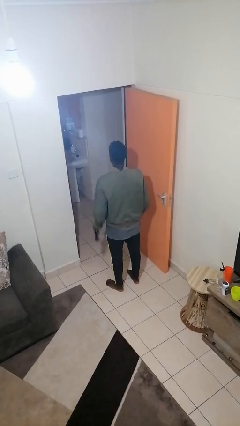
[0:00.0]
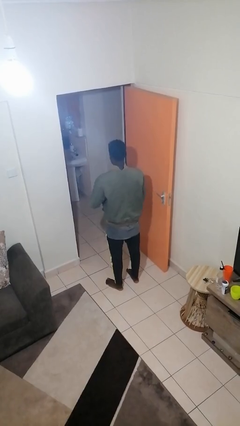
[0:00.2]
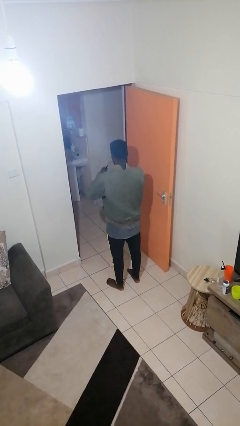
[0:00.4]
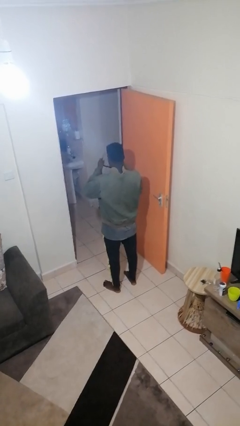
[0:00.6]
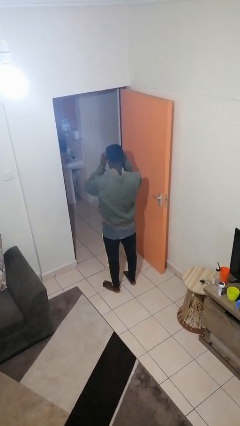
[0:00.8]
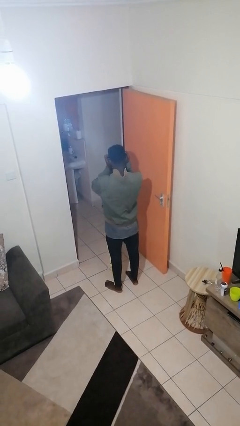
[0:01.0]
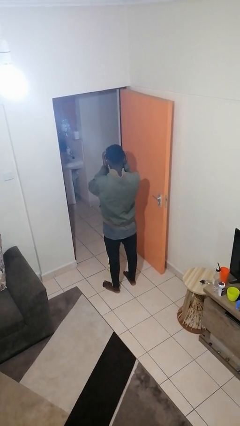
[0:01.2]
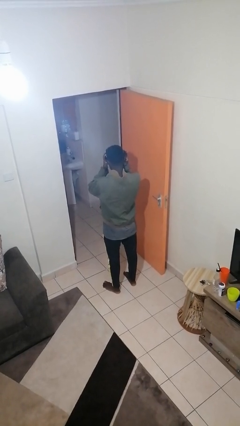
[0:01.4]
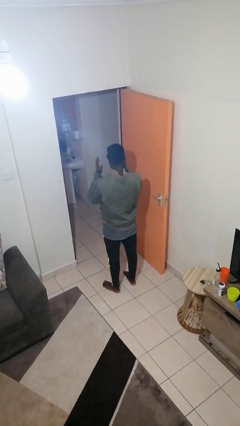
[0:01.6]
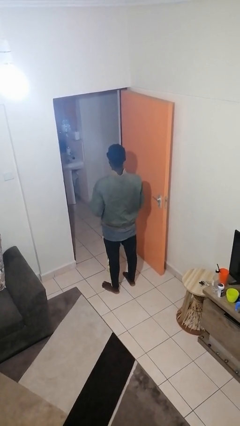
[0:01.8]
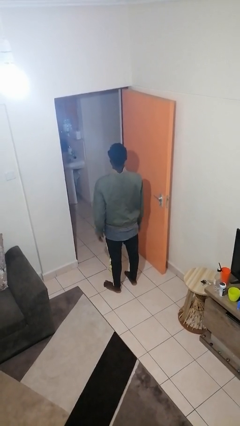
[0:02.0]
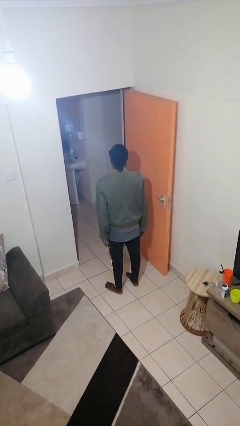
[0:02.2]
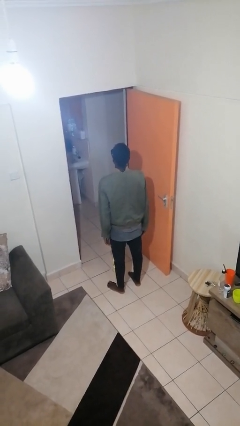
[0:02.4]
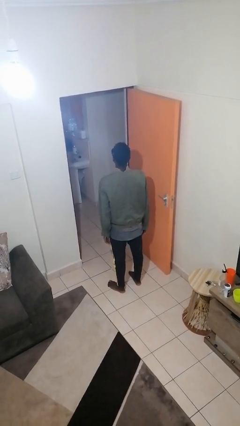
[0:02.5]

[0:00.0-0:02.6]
person puts on sunglasses

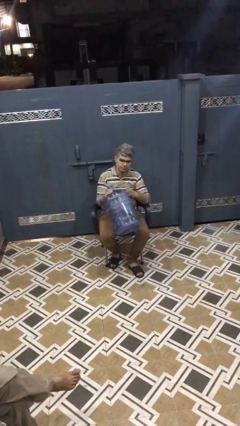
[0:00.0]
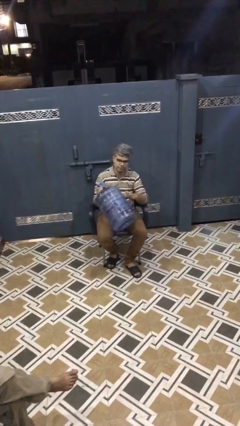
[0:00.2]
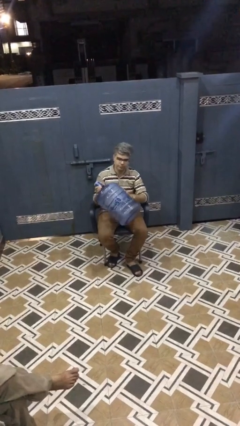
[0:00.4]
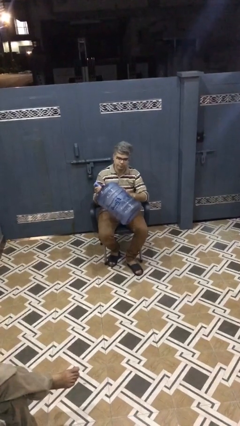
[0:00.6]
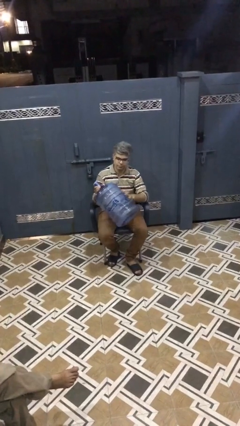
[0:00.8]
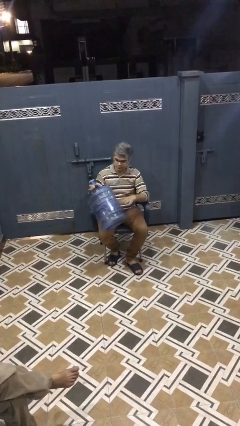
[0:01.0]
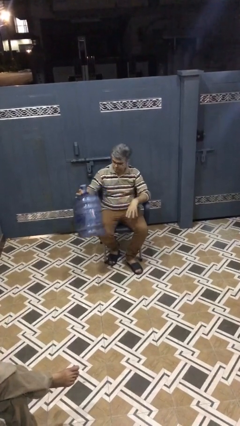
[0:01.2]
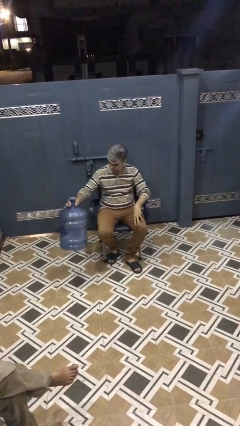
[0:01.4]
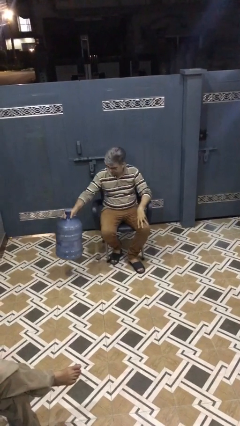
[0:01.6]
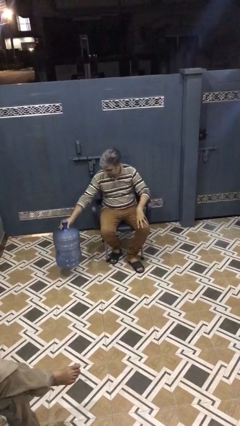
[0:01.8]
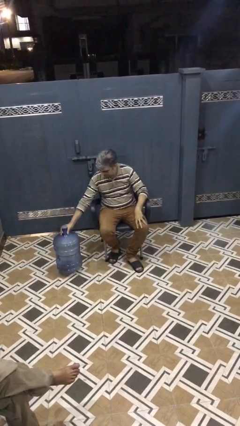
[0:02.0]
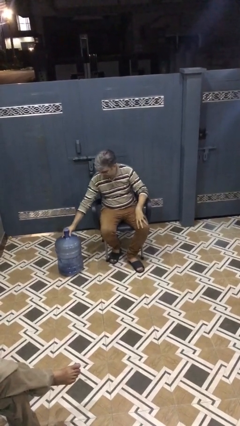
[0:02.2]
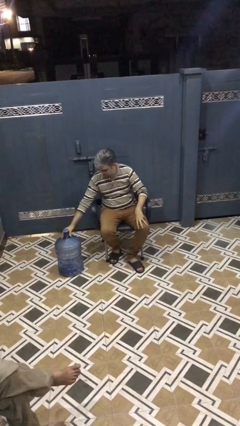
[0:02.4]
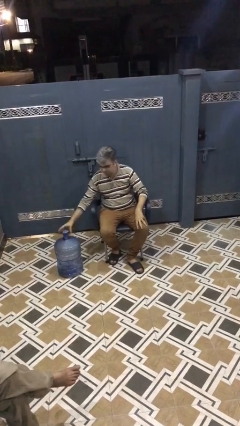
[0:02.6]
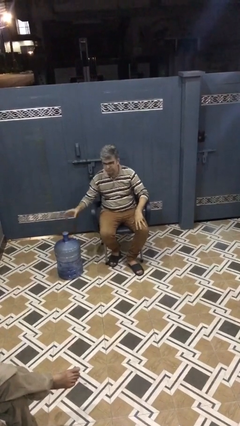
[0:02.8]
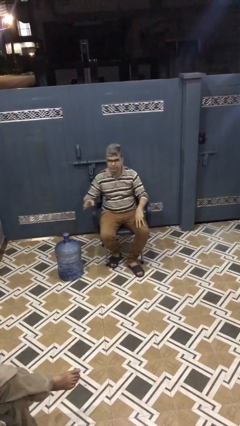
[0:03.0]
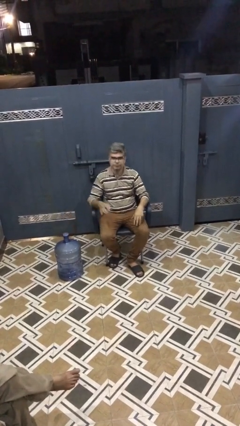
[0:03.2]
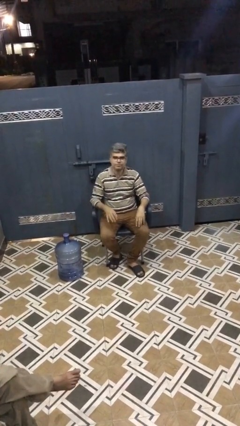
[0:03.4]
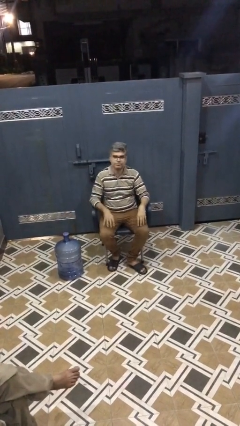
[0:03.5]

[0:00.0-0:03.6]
person puts down object on floor

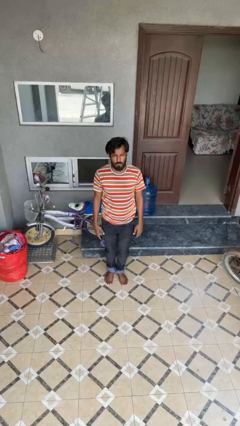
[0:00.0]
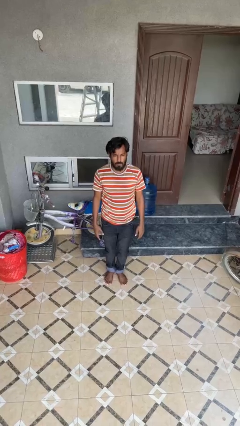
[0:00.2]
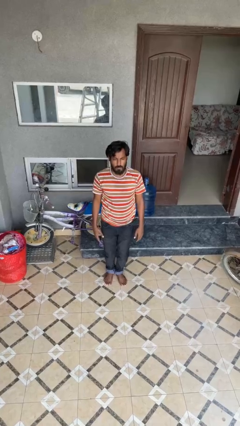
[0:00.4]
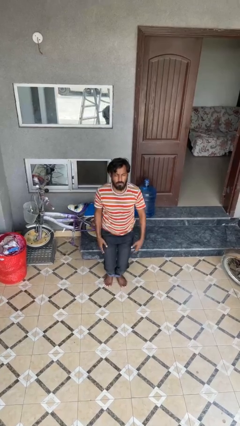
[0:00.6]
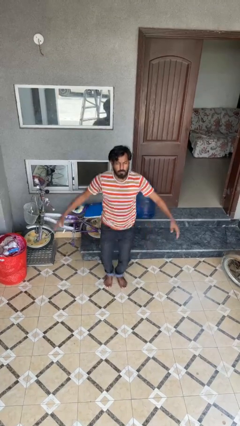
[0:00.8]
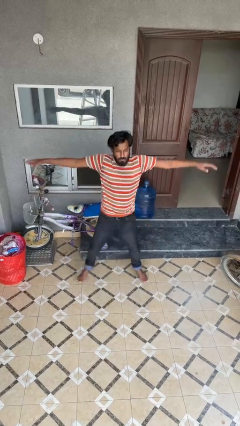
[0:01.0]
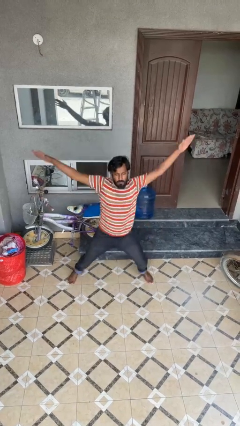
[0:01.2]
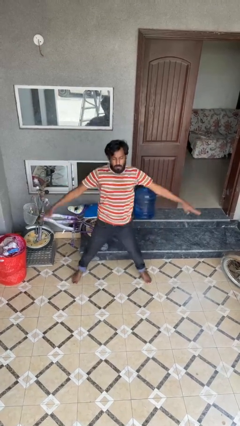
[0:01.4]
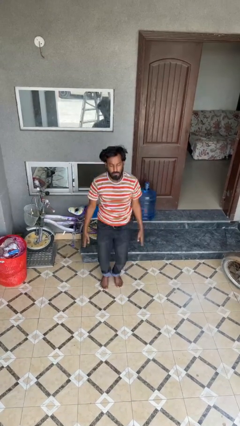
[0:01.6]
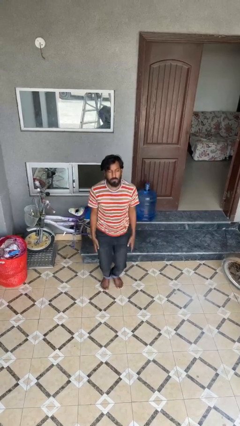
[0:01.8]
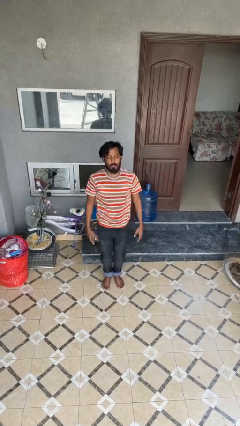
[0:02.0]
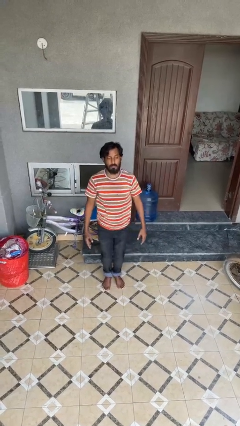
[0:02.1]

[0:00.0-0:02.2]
person exercises with jumping jacks

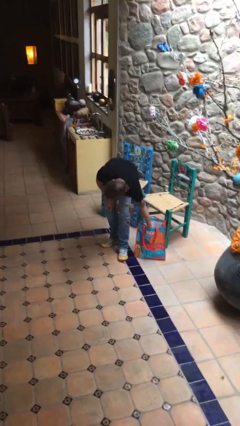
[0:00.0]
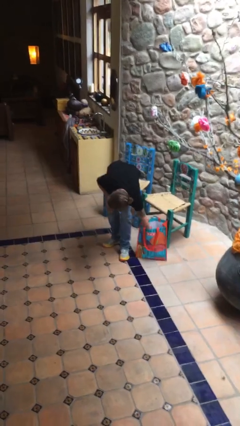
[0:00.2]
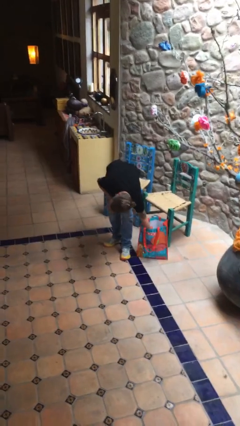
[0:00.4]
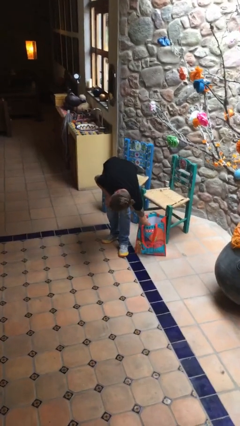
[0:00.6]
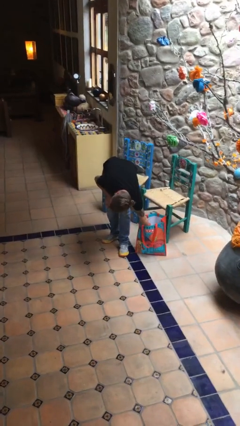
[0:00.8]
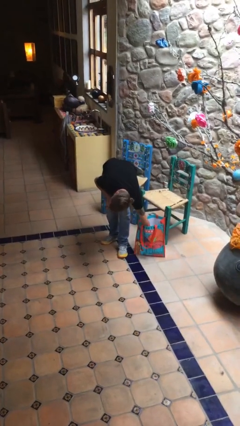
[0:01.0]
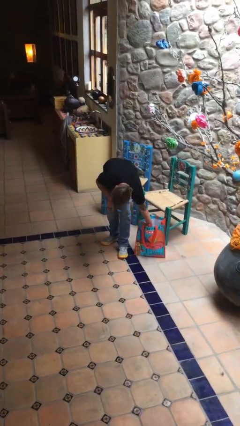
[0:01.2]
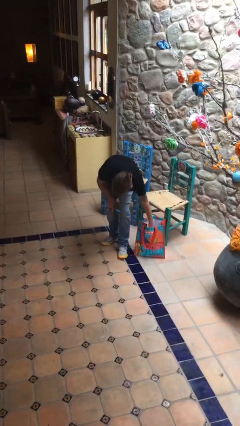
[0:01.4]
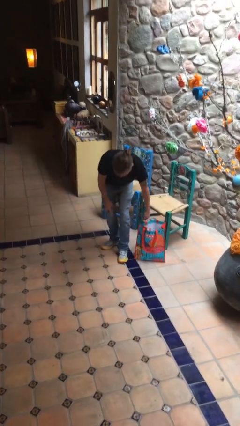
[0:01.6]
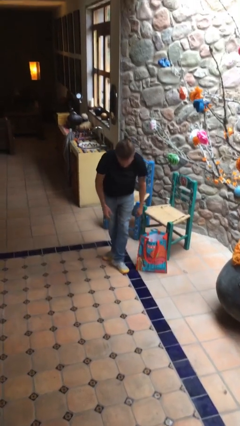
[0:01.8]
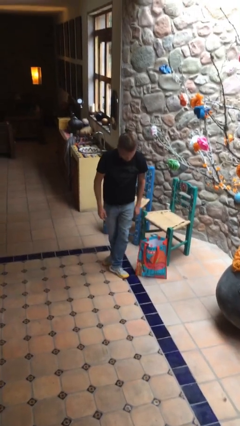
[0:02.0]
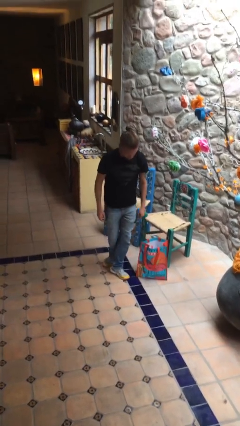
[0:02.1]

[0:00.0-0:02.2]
person searches in bag

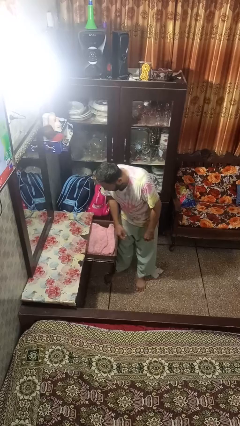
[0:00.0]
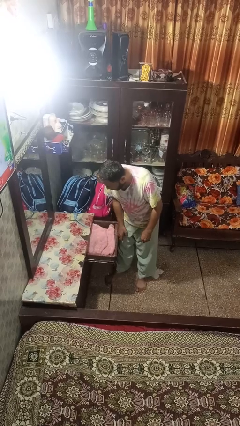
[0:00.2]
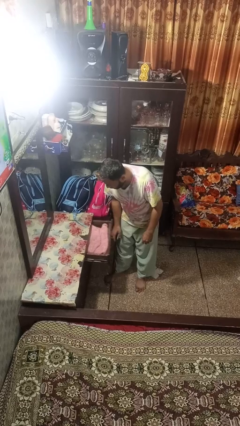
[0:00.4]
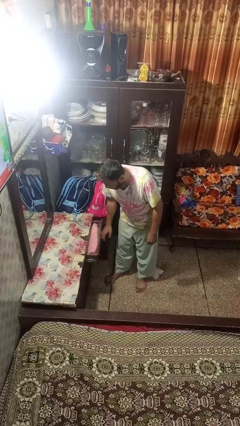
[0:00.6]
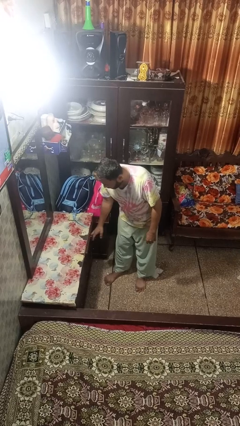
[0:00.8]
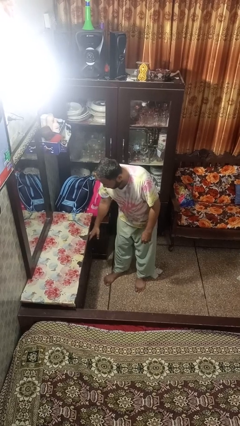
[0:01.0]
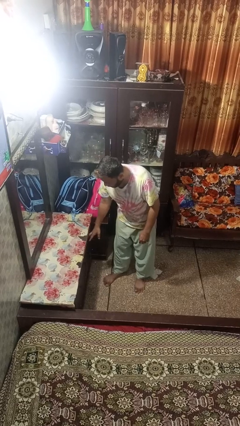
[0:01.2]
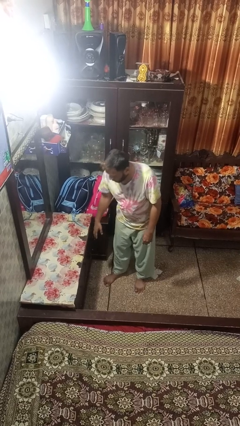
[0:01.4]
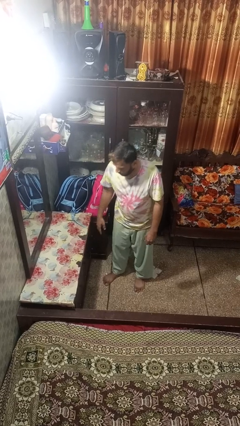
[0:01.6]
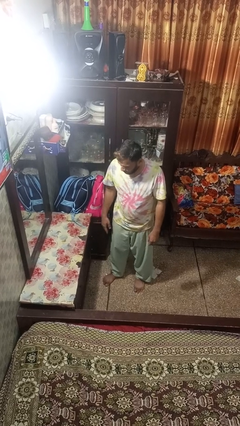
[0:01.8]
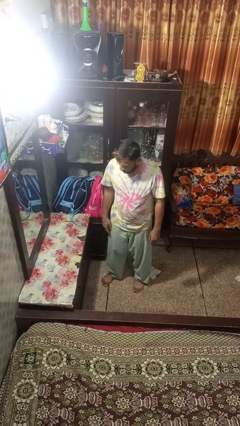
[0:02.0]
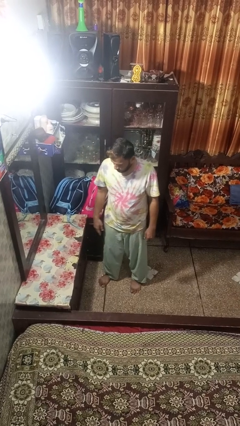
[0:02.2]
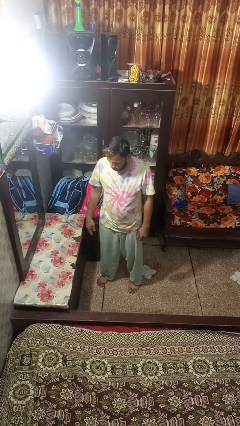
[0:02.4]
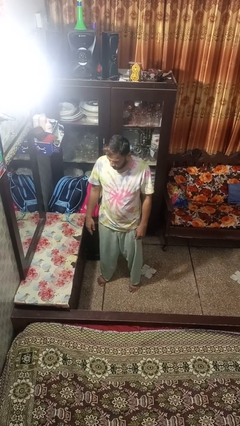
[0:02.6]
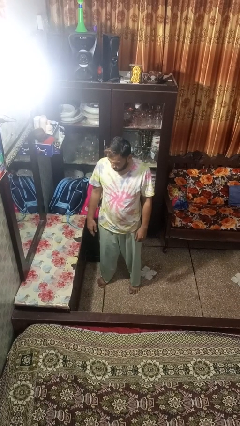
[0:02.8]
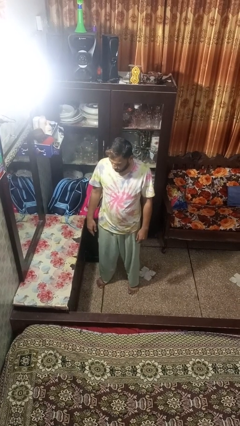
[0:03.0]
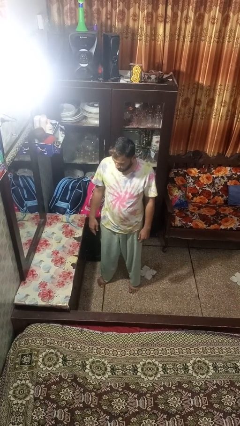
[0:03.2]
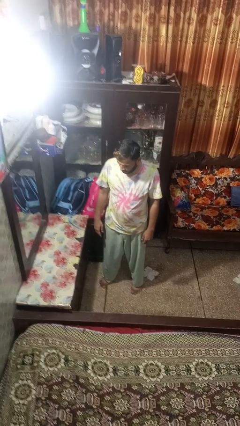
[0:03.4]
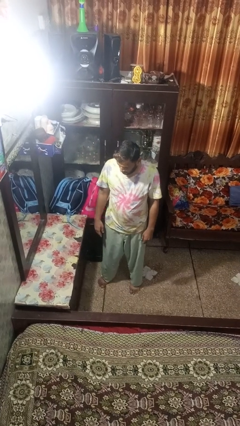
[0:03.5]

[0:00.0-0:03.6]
person closes dresser drawer

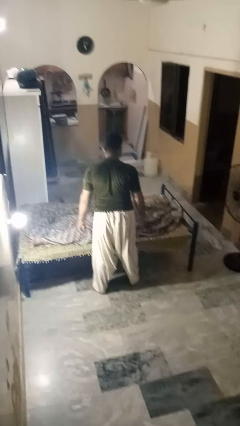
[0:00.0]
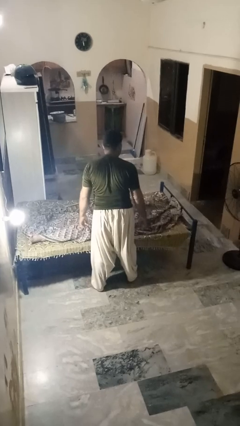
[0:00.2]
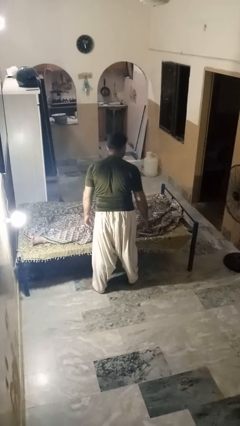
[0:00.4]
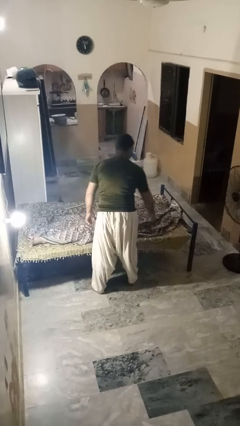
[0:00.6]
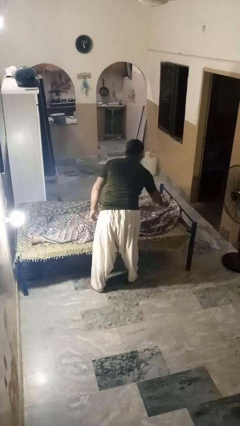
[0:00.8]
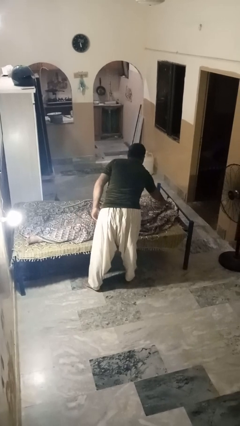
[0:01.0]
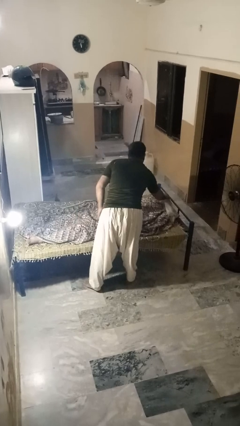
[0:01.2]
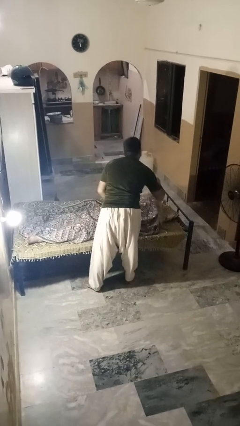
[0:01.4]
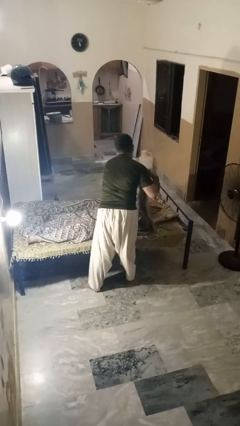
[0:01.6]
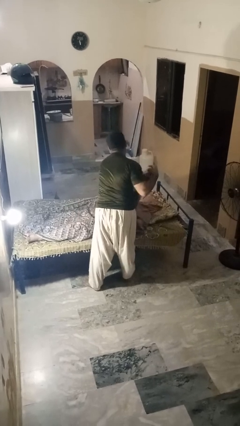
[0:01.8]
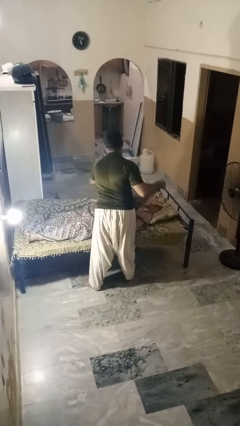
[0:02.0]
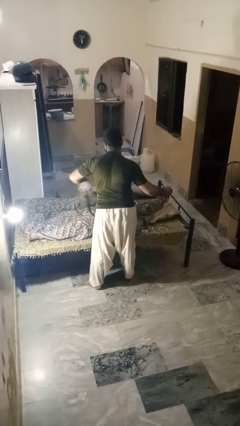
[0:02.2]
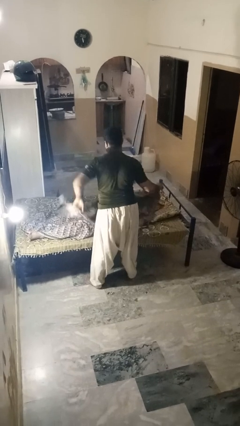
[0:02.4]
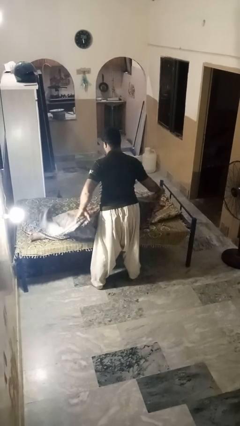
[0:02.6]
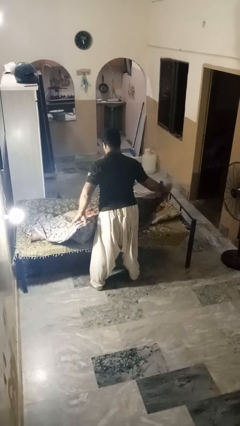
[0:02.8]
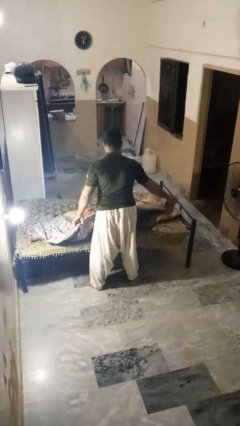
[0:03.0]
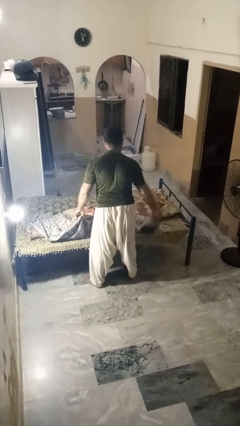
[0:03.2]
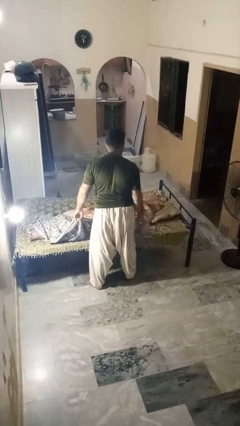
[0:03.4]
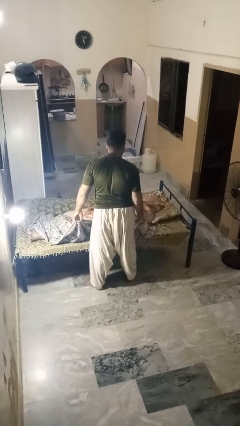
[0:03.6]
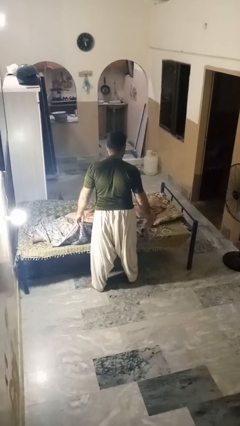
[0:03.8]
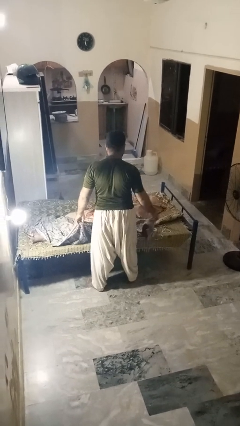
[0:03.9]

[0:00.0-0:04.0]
person uncovers friend with blanket
